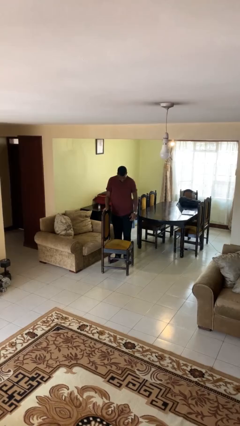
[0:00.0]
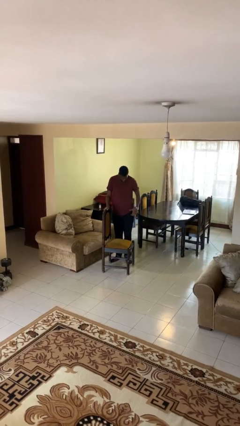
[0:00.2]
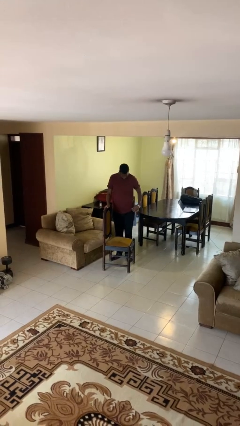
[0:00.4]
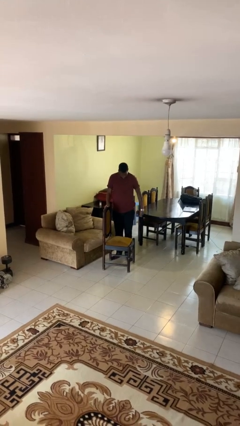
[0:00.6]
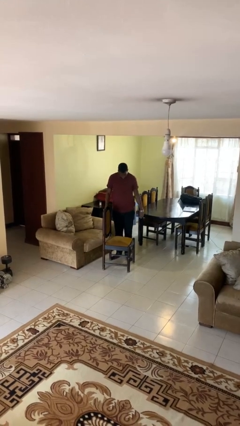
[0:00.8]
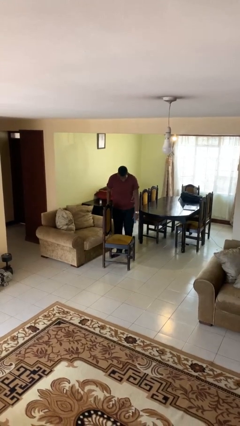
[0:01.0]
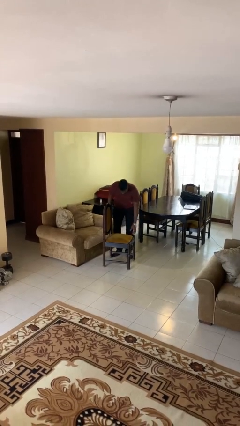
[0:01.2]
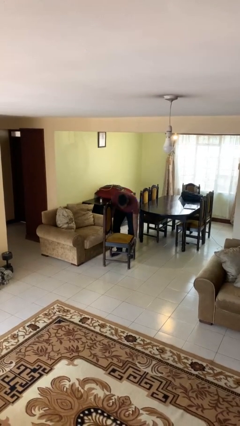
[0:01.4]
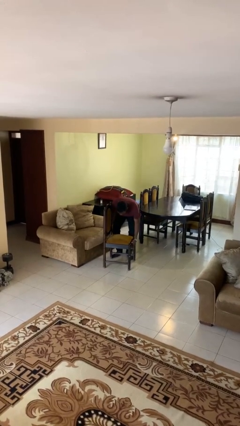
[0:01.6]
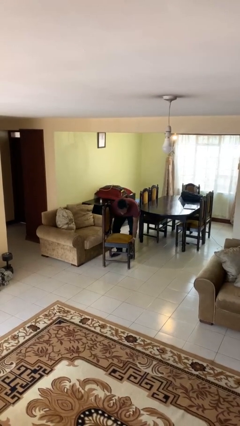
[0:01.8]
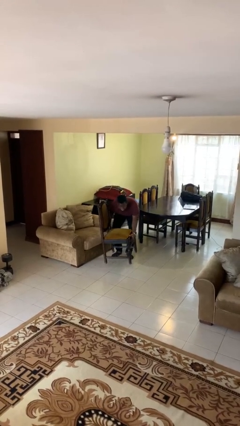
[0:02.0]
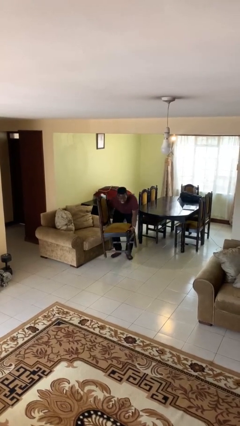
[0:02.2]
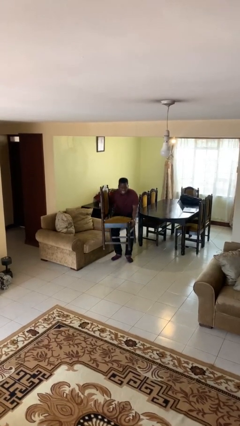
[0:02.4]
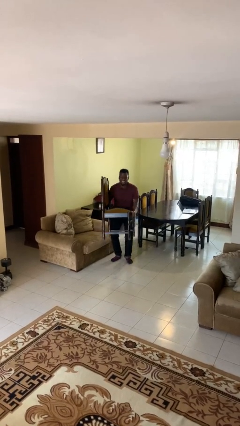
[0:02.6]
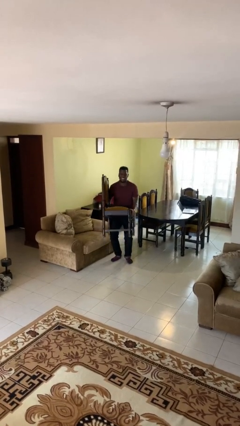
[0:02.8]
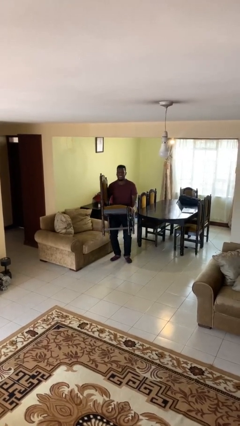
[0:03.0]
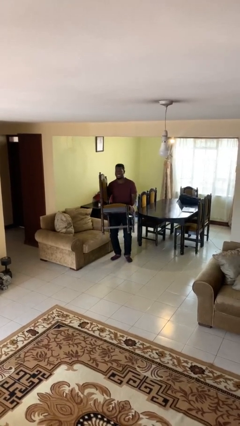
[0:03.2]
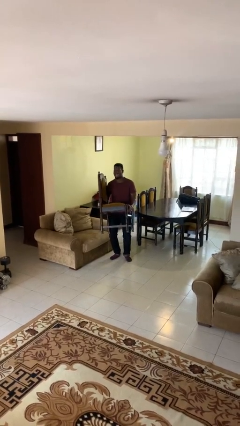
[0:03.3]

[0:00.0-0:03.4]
person picks up object from floor

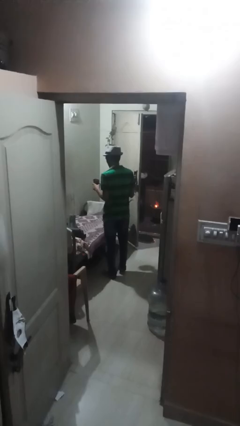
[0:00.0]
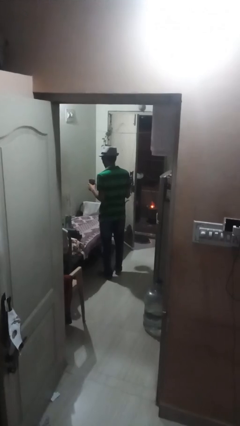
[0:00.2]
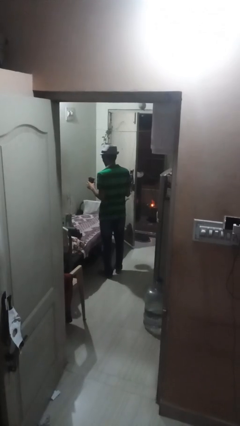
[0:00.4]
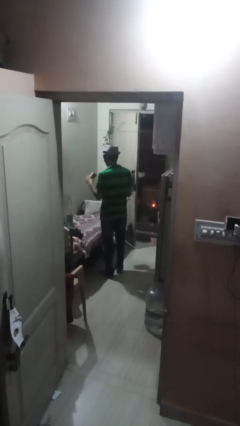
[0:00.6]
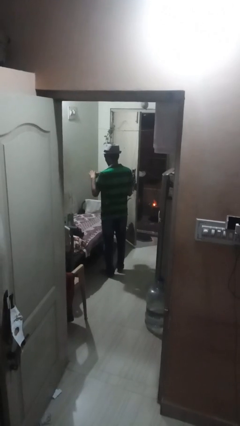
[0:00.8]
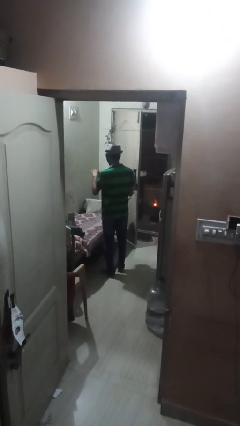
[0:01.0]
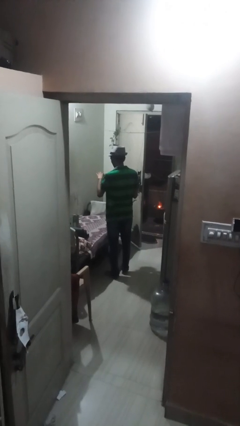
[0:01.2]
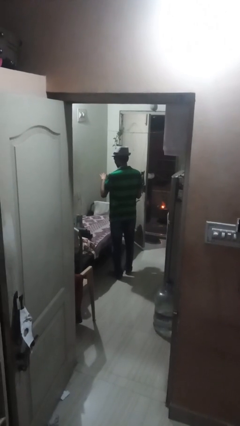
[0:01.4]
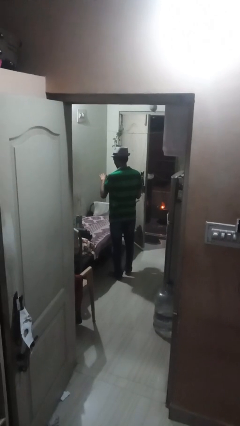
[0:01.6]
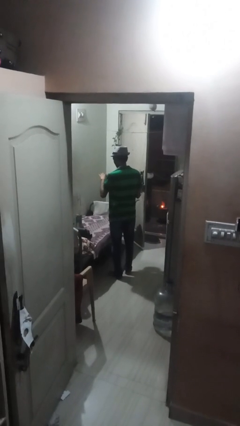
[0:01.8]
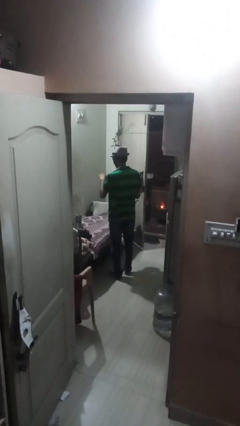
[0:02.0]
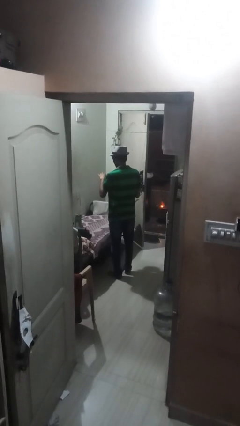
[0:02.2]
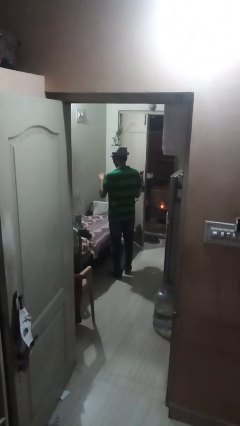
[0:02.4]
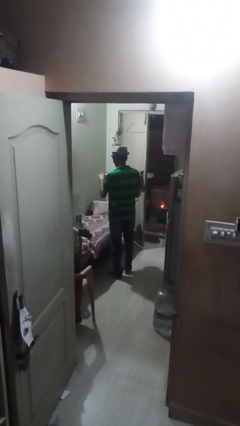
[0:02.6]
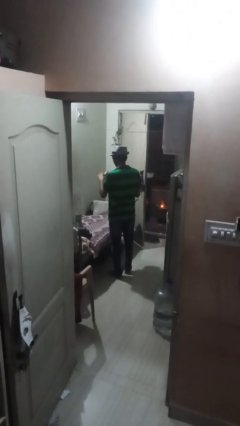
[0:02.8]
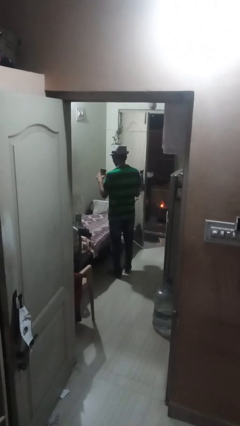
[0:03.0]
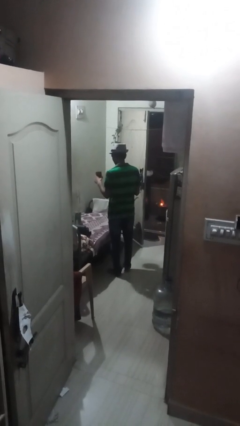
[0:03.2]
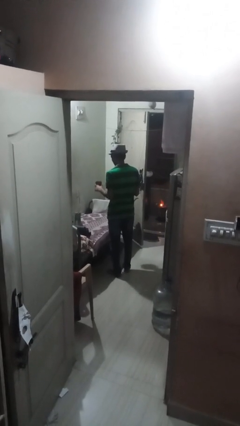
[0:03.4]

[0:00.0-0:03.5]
person pours coffee into mug

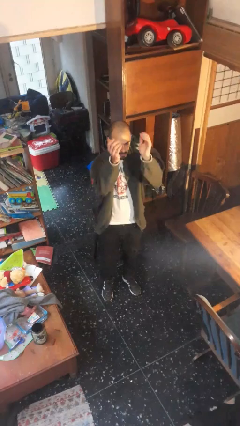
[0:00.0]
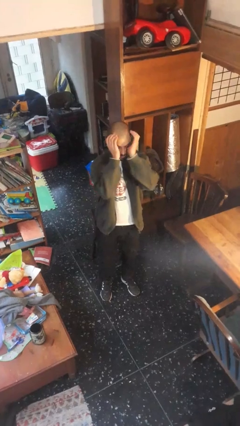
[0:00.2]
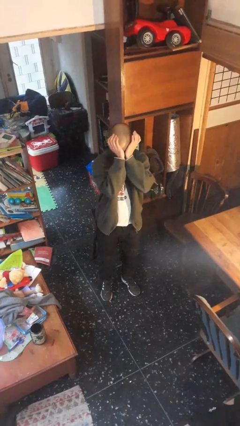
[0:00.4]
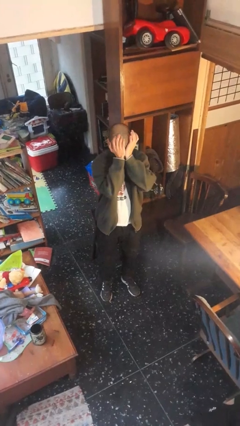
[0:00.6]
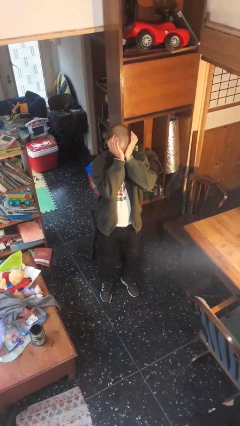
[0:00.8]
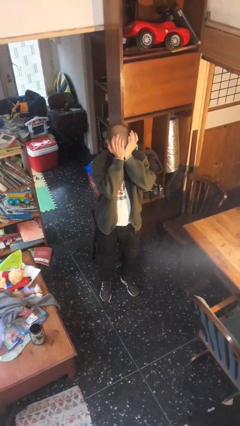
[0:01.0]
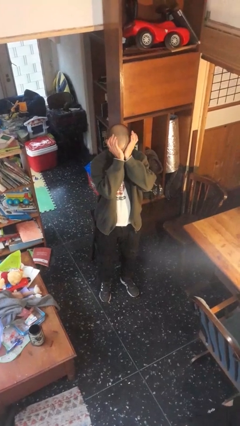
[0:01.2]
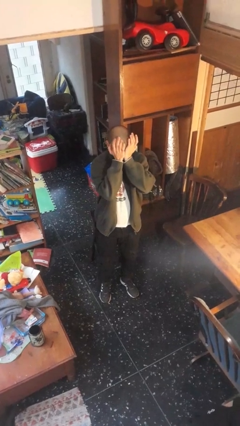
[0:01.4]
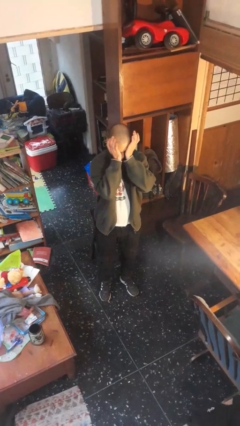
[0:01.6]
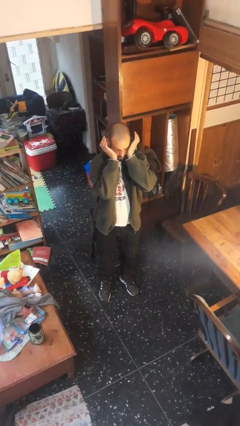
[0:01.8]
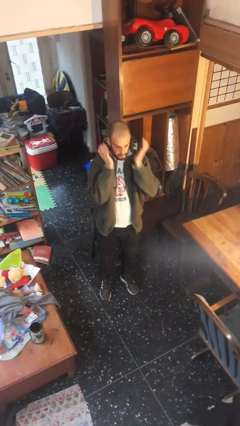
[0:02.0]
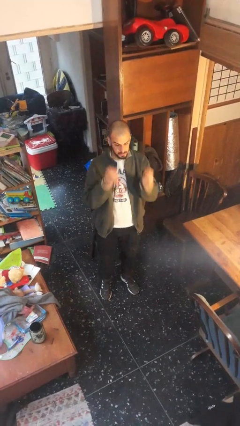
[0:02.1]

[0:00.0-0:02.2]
person rubs eyes

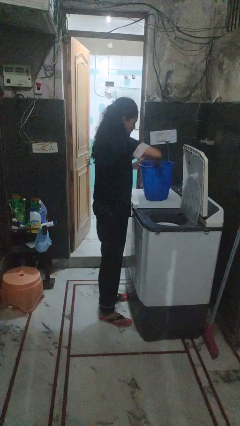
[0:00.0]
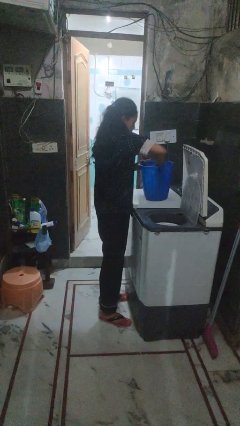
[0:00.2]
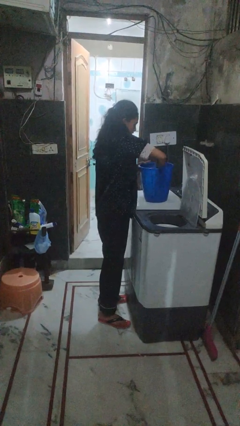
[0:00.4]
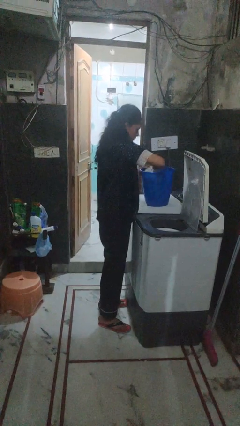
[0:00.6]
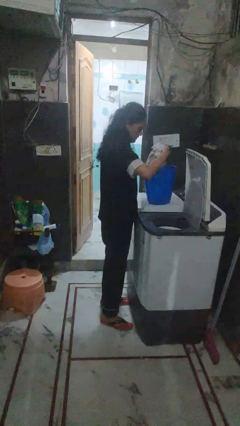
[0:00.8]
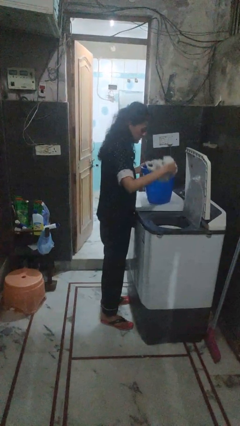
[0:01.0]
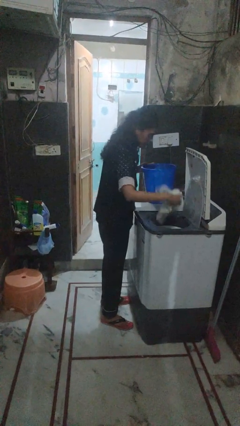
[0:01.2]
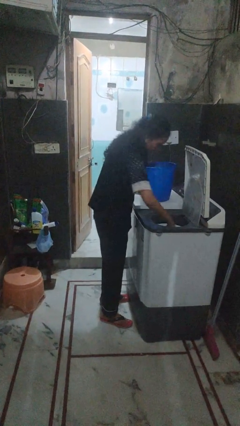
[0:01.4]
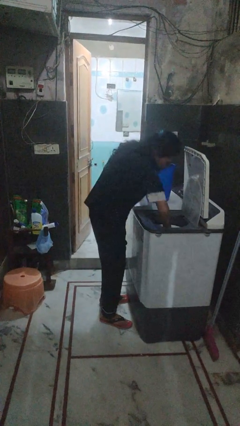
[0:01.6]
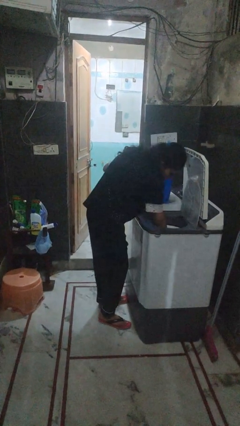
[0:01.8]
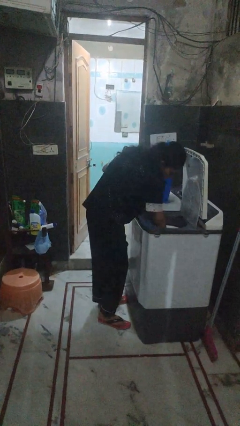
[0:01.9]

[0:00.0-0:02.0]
person loads dryer

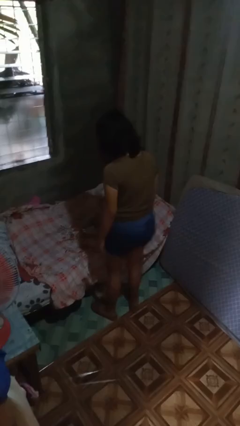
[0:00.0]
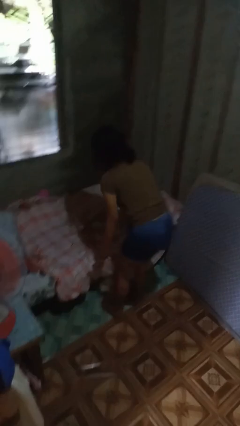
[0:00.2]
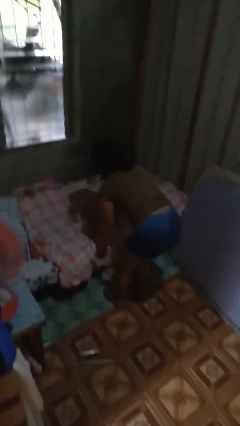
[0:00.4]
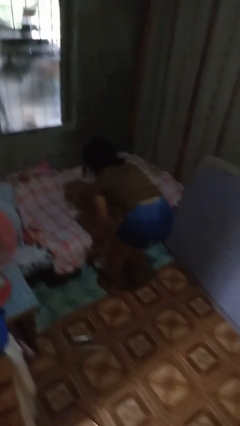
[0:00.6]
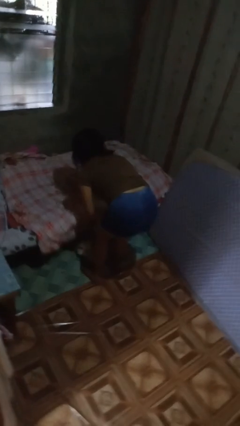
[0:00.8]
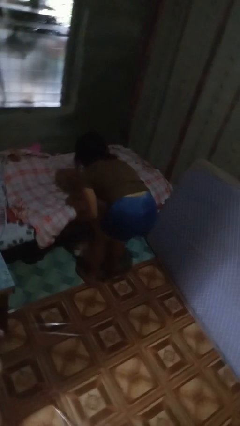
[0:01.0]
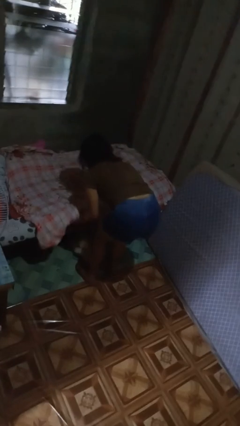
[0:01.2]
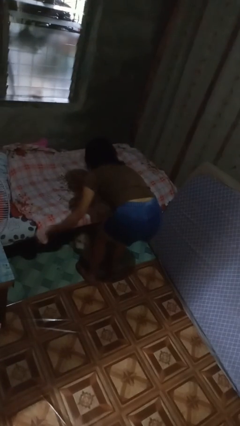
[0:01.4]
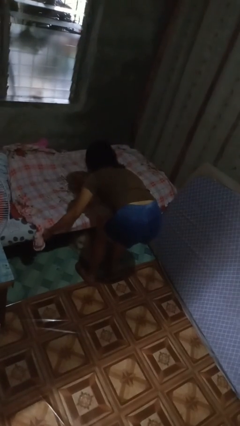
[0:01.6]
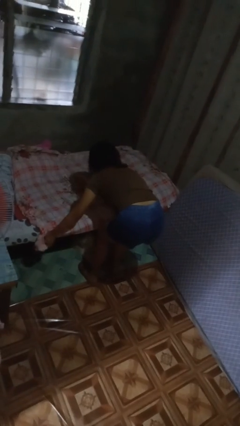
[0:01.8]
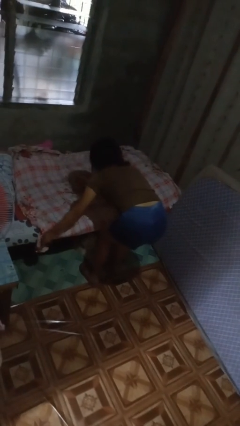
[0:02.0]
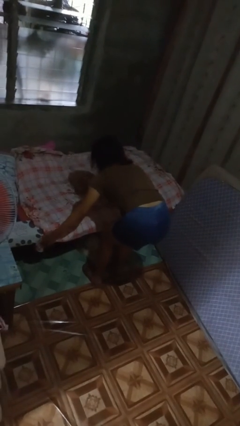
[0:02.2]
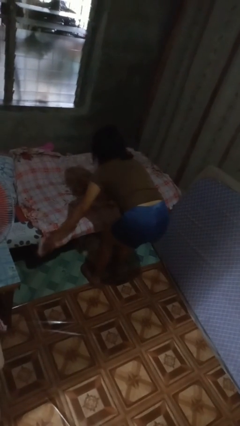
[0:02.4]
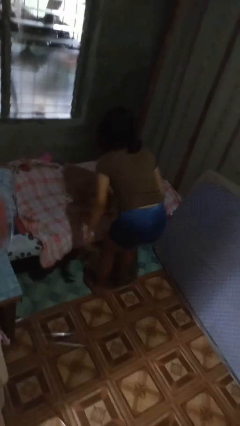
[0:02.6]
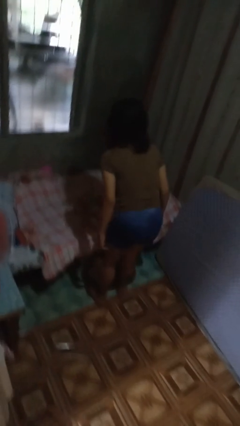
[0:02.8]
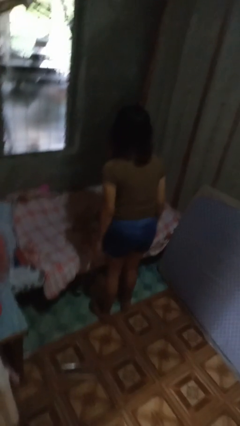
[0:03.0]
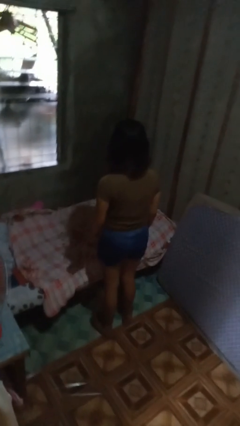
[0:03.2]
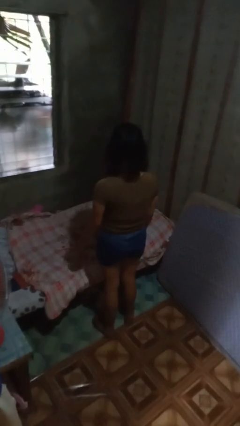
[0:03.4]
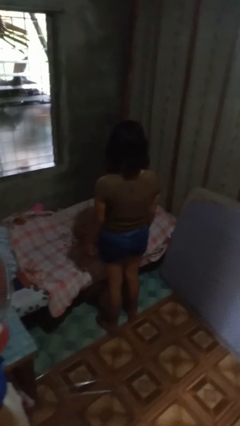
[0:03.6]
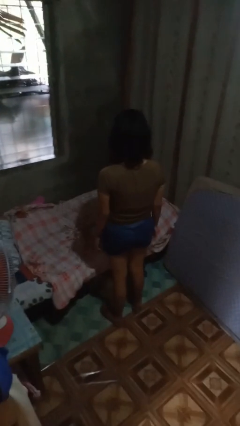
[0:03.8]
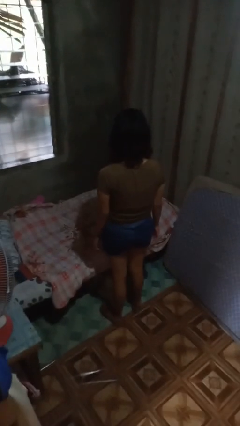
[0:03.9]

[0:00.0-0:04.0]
person makes bed

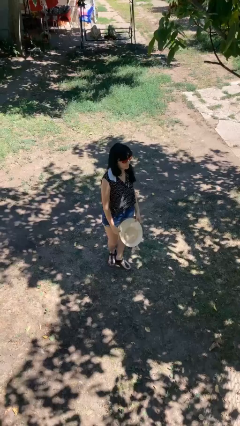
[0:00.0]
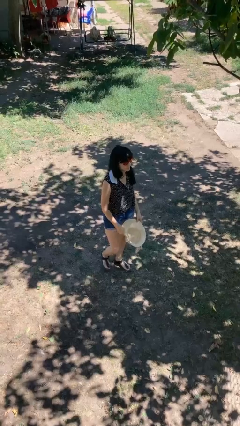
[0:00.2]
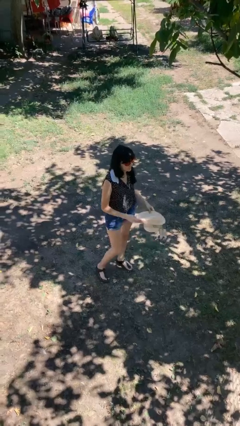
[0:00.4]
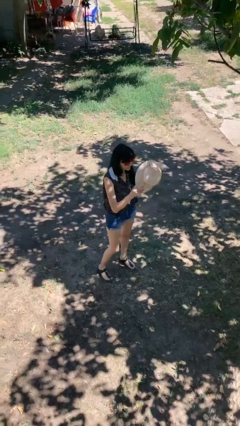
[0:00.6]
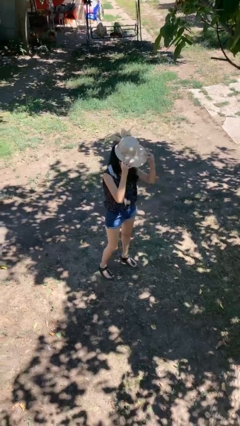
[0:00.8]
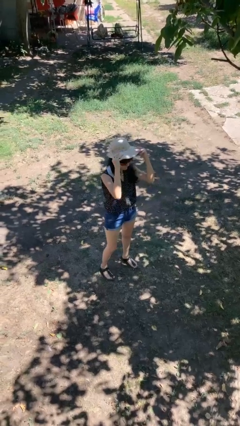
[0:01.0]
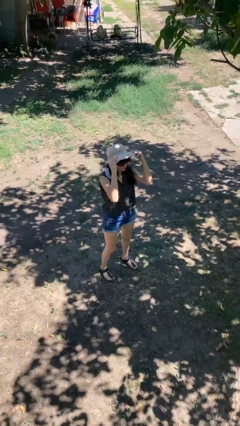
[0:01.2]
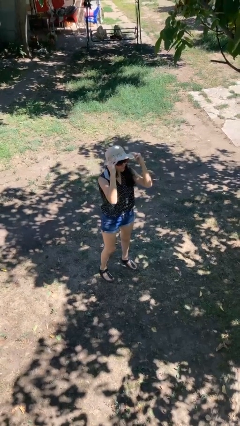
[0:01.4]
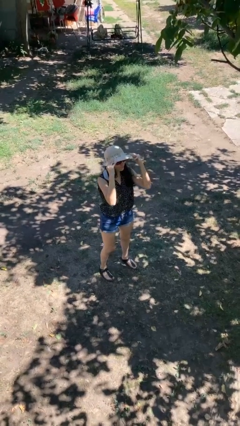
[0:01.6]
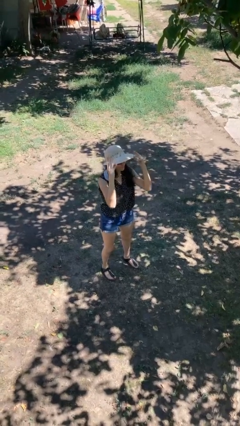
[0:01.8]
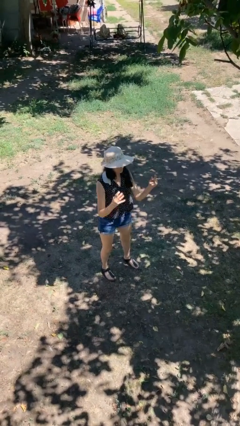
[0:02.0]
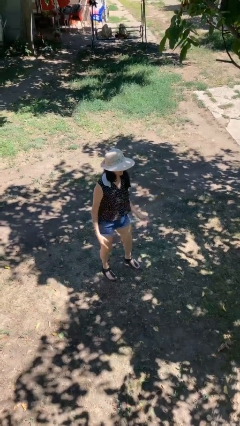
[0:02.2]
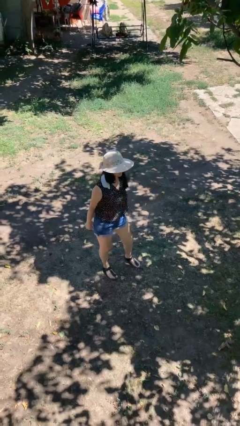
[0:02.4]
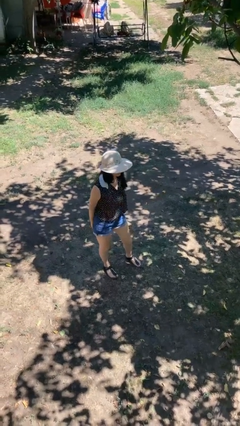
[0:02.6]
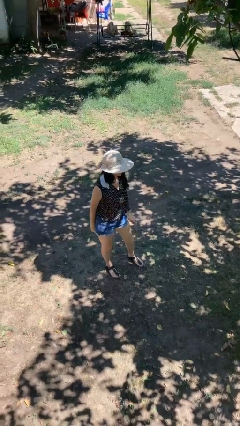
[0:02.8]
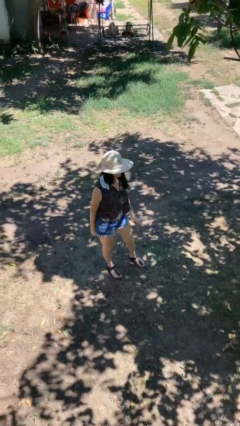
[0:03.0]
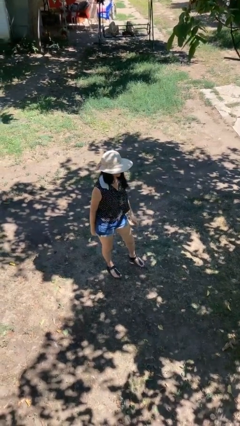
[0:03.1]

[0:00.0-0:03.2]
person puts on hat
